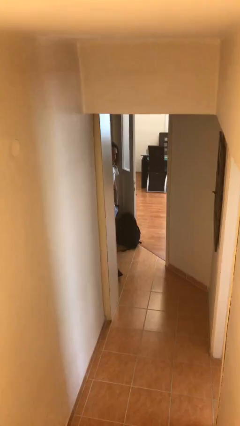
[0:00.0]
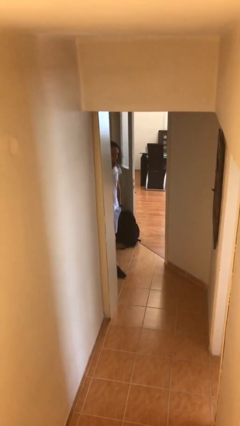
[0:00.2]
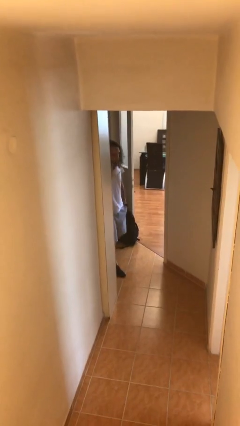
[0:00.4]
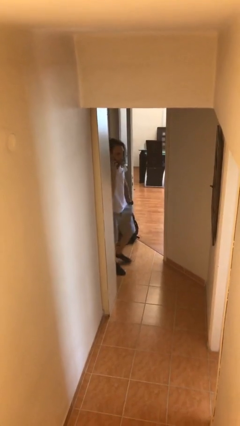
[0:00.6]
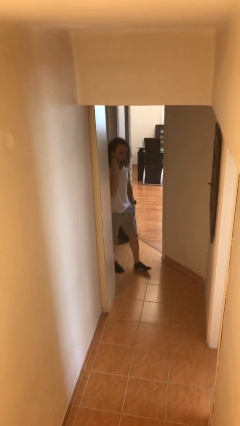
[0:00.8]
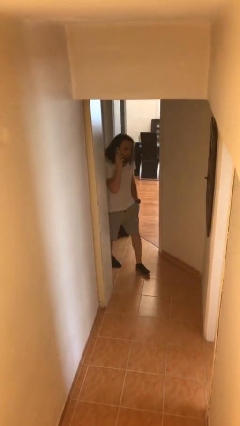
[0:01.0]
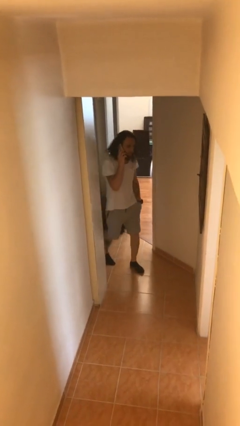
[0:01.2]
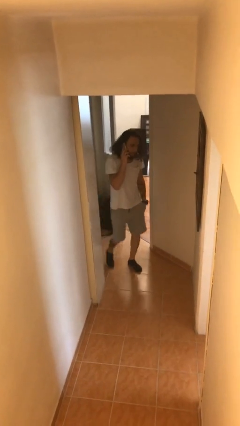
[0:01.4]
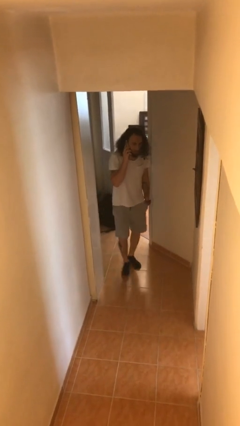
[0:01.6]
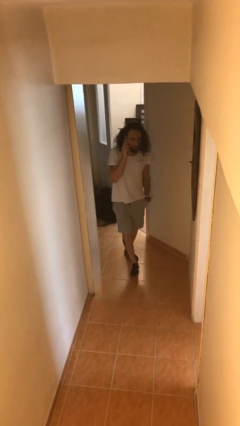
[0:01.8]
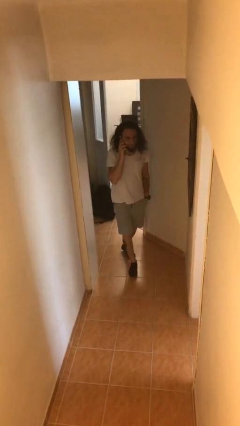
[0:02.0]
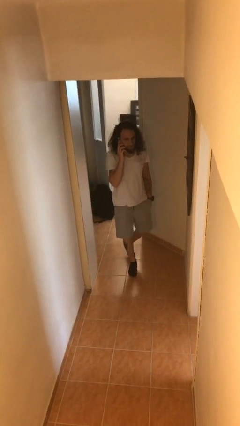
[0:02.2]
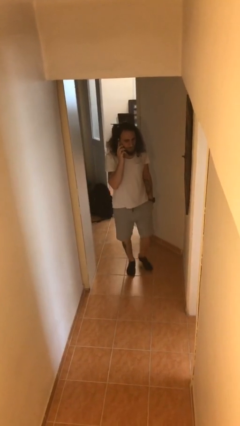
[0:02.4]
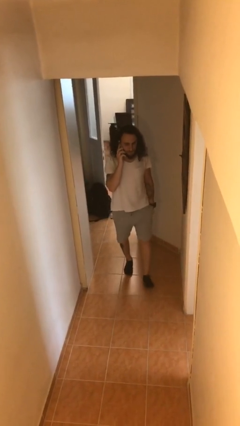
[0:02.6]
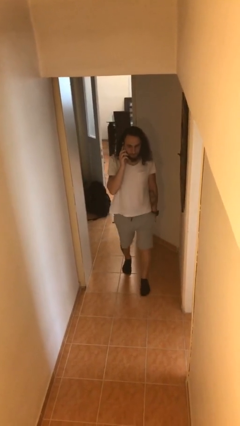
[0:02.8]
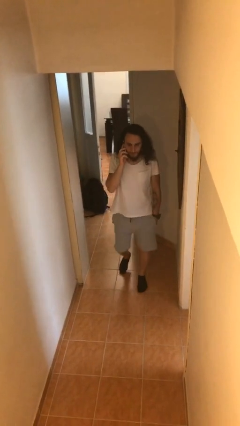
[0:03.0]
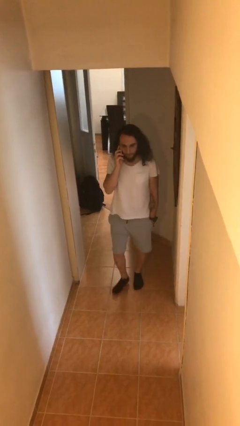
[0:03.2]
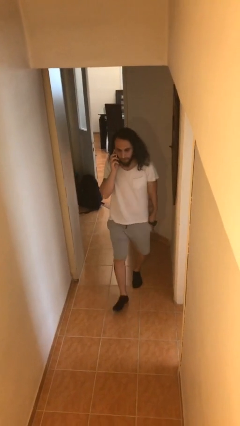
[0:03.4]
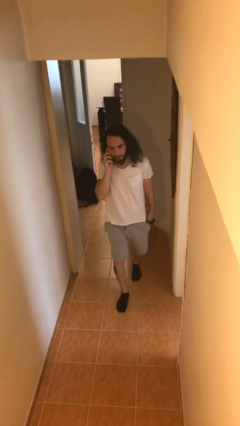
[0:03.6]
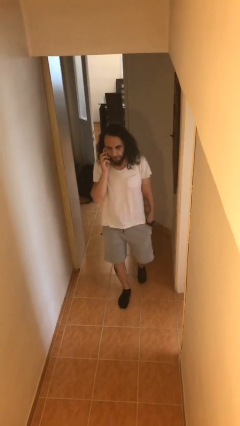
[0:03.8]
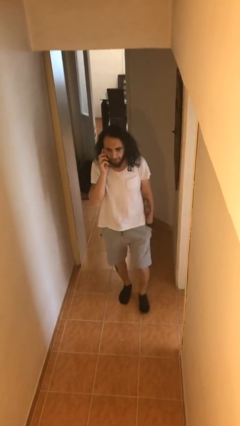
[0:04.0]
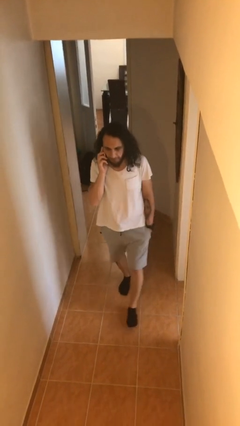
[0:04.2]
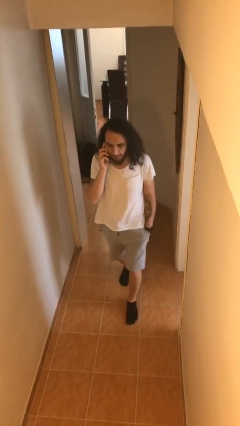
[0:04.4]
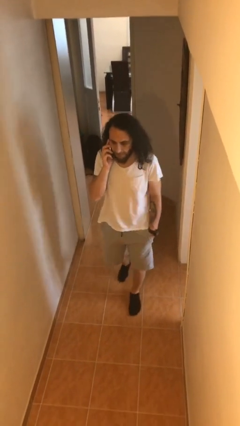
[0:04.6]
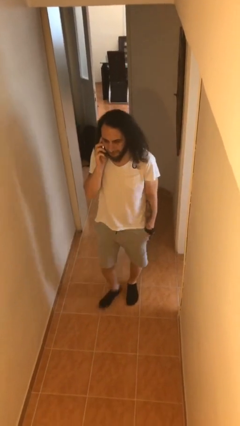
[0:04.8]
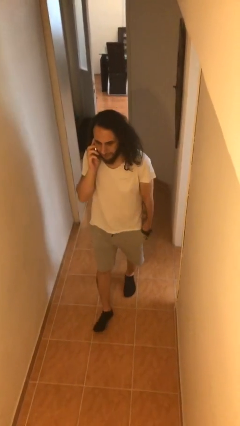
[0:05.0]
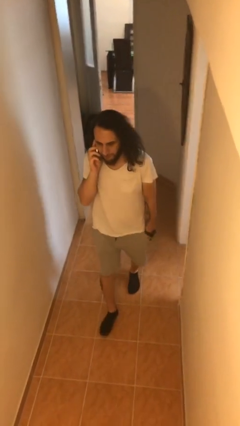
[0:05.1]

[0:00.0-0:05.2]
person enters scene through structure

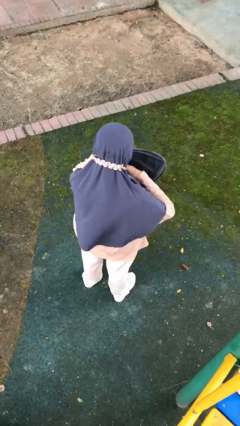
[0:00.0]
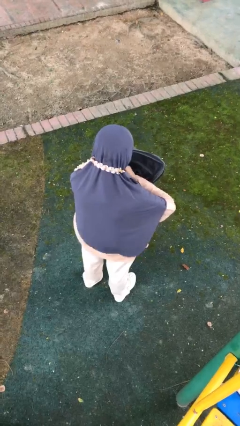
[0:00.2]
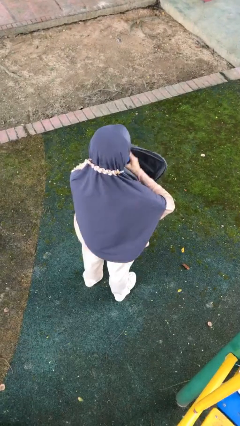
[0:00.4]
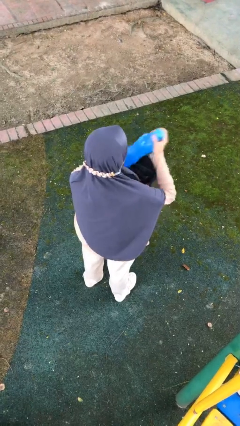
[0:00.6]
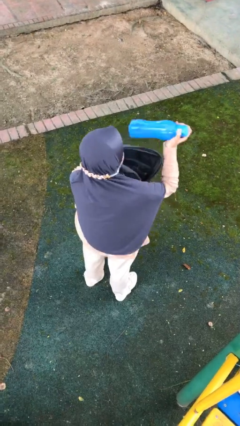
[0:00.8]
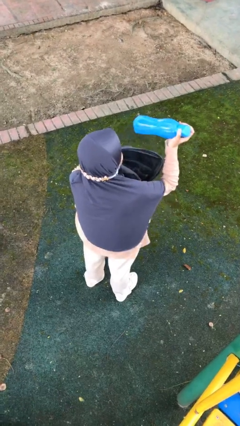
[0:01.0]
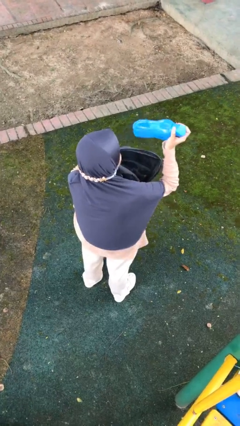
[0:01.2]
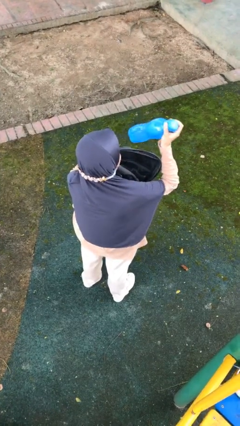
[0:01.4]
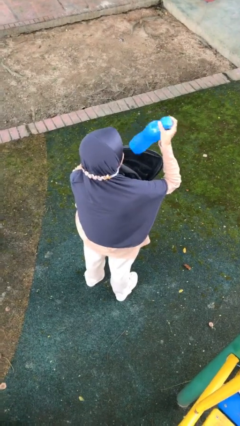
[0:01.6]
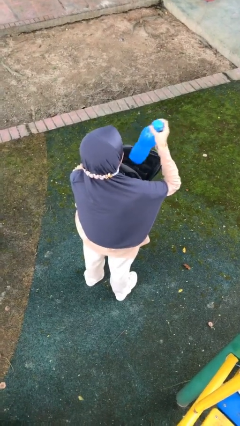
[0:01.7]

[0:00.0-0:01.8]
person takes object from backpack

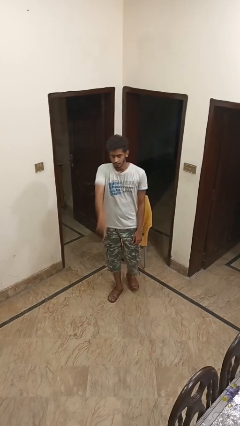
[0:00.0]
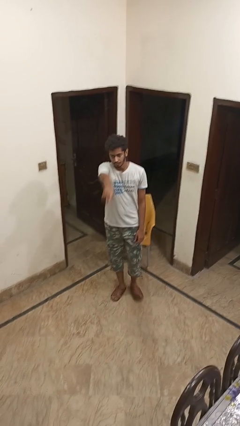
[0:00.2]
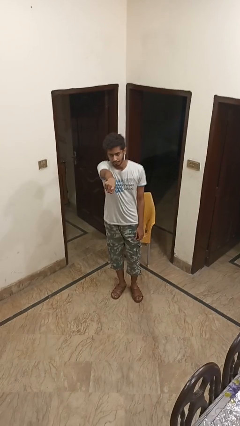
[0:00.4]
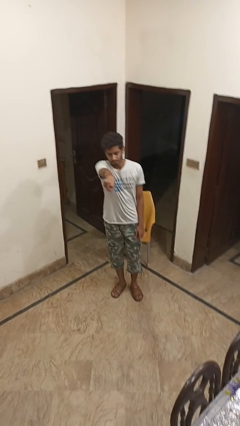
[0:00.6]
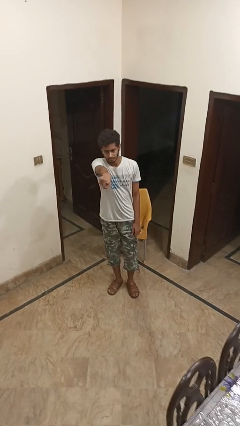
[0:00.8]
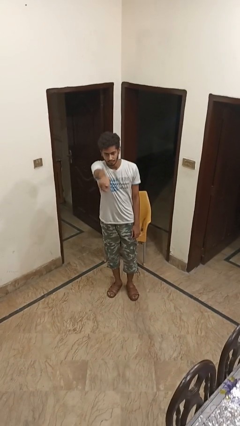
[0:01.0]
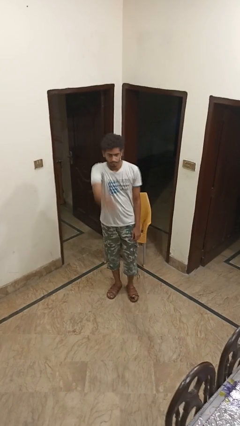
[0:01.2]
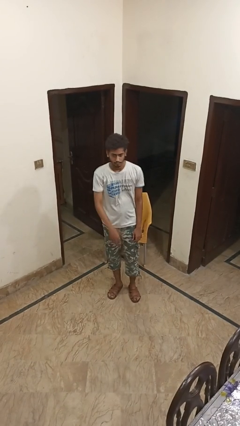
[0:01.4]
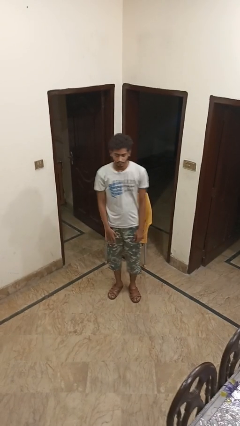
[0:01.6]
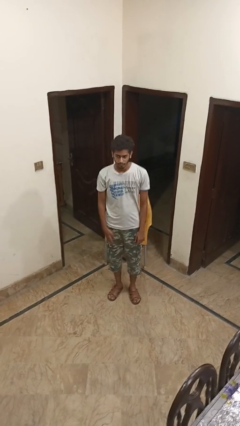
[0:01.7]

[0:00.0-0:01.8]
person points at person

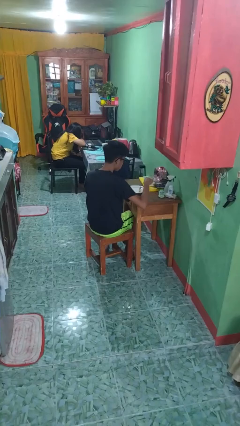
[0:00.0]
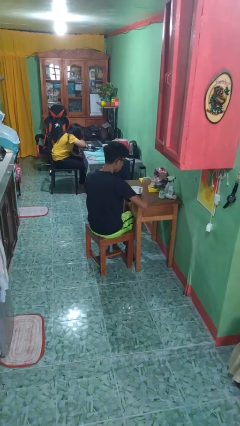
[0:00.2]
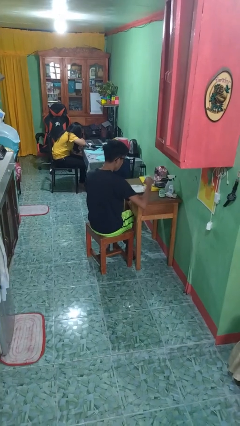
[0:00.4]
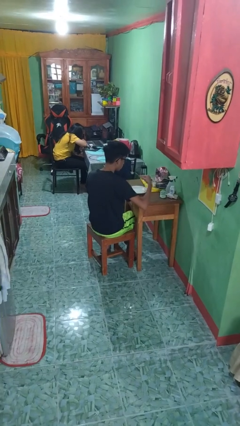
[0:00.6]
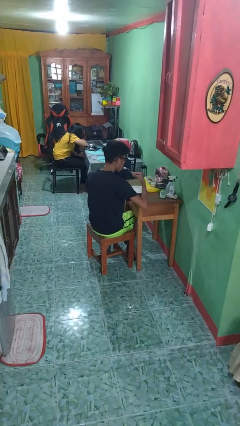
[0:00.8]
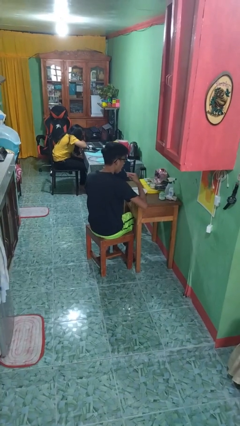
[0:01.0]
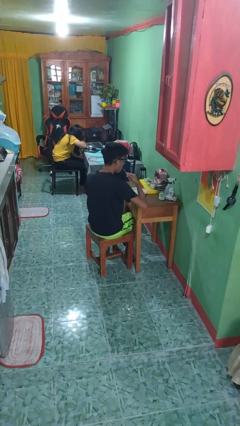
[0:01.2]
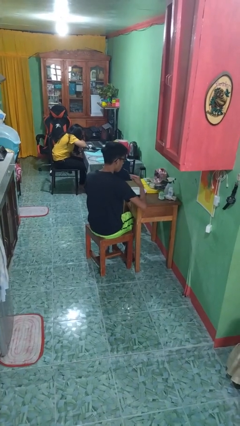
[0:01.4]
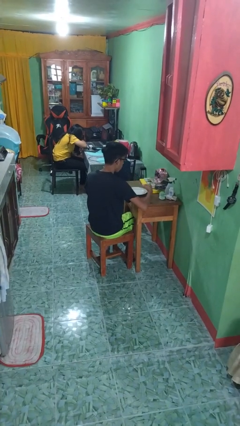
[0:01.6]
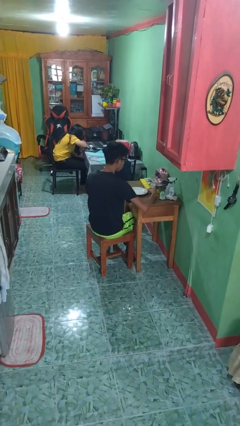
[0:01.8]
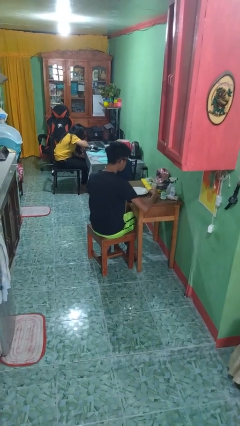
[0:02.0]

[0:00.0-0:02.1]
person eats with utensil

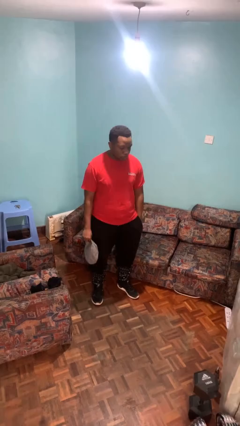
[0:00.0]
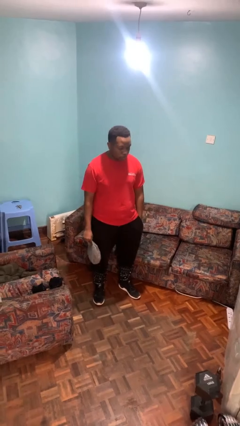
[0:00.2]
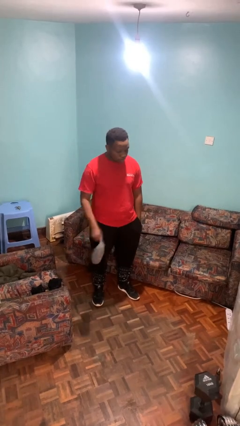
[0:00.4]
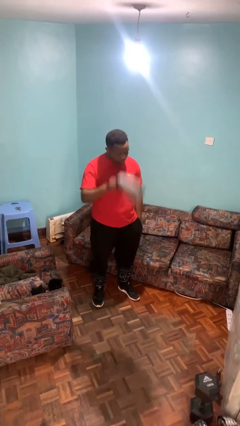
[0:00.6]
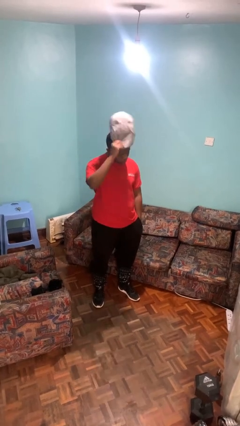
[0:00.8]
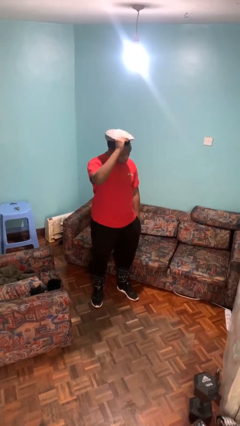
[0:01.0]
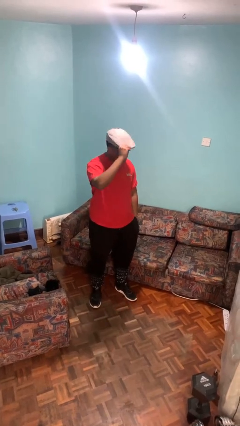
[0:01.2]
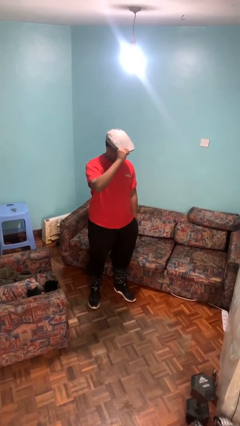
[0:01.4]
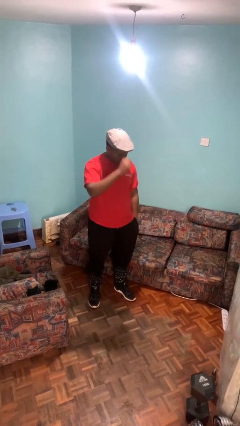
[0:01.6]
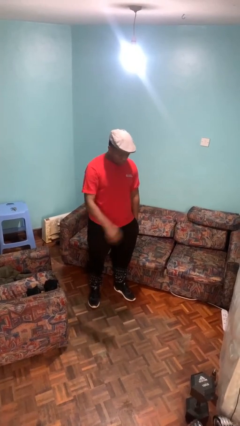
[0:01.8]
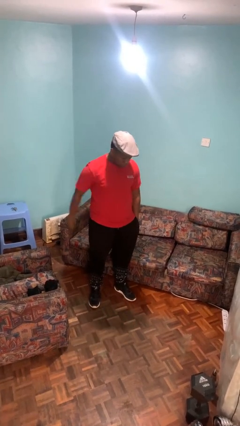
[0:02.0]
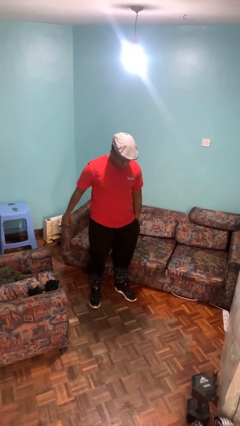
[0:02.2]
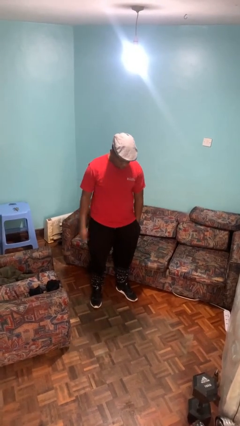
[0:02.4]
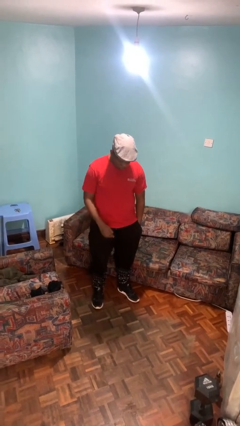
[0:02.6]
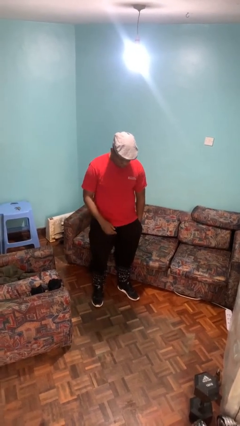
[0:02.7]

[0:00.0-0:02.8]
person puts on hat

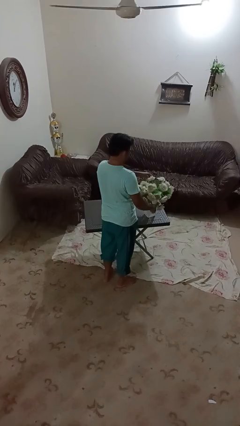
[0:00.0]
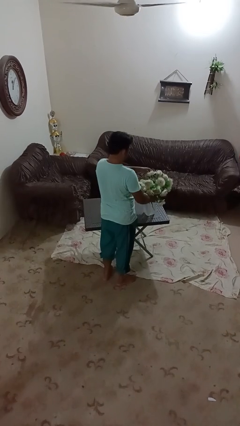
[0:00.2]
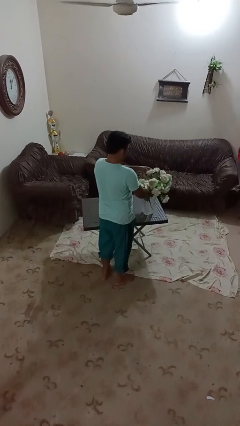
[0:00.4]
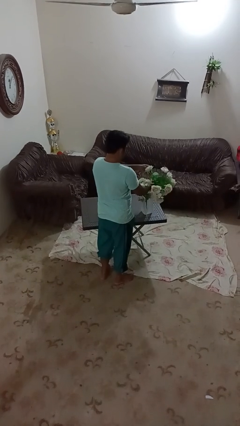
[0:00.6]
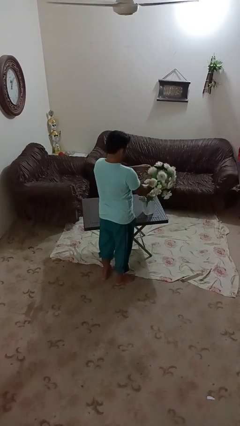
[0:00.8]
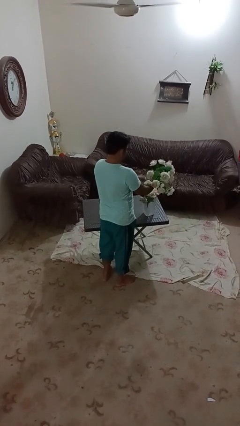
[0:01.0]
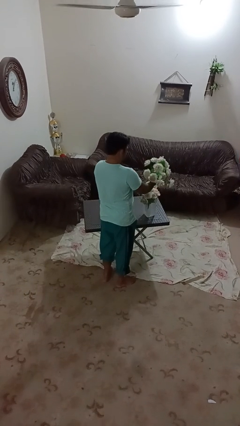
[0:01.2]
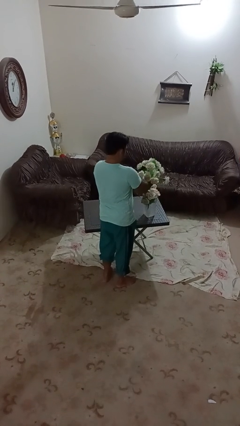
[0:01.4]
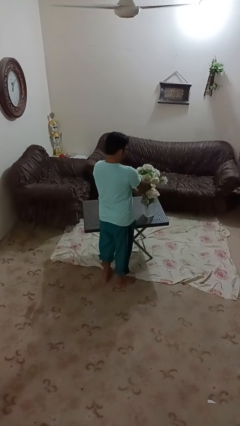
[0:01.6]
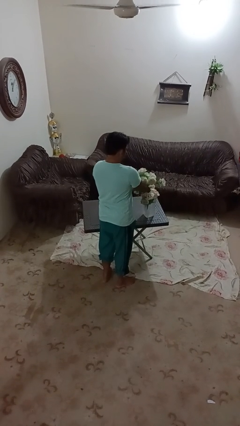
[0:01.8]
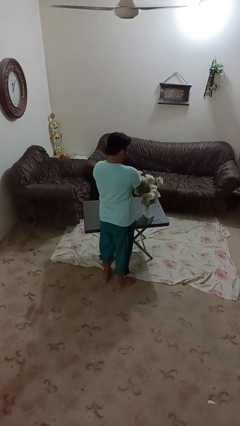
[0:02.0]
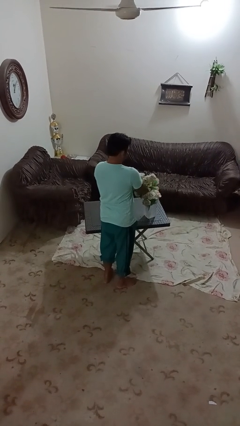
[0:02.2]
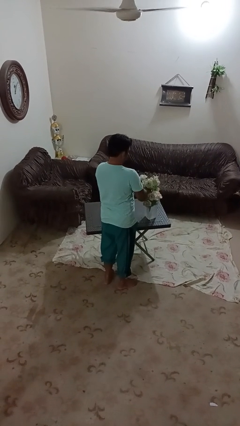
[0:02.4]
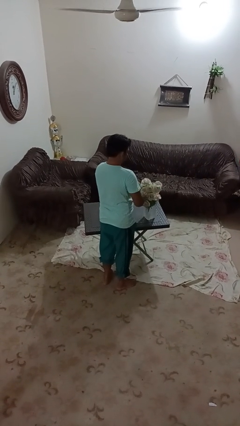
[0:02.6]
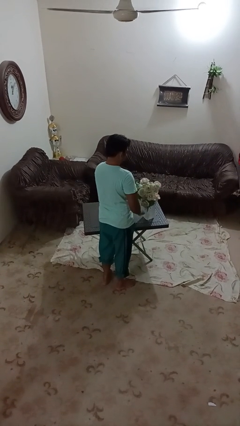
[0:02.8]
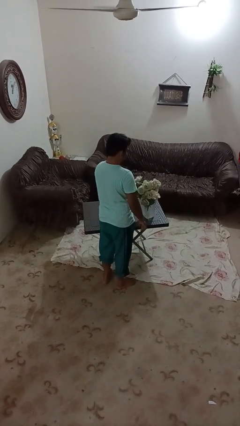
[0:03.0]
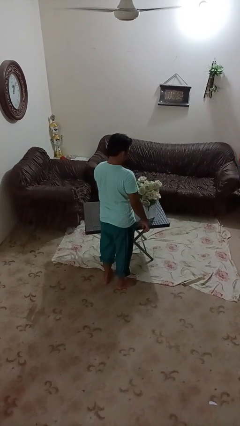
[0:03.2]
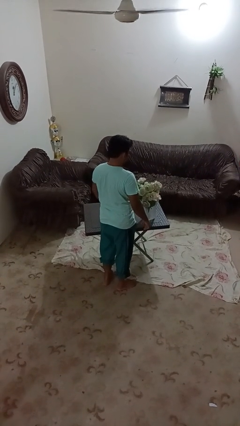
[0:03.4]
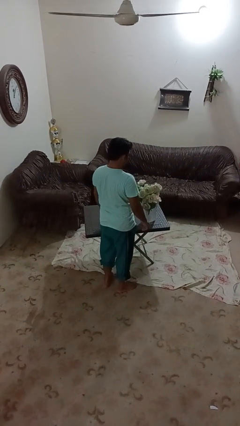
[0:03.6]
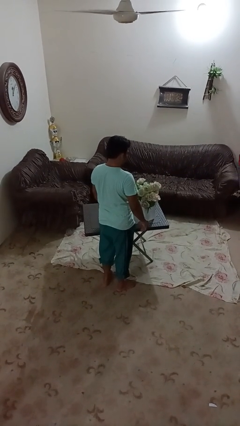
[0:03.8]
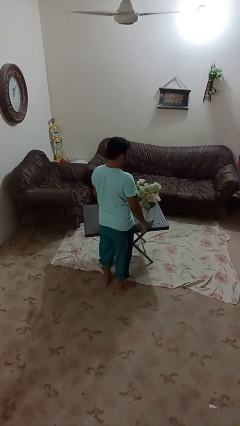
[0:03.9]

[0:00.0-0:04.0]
person arranges flowers in vase
